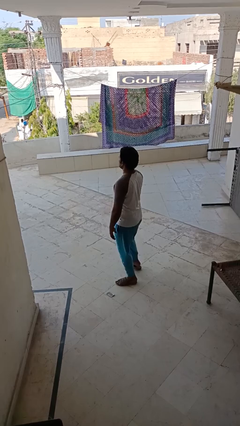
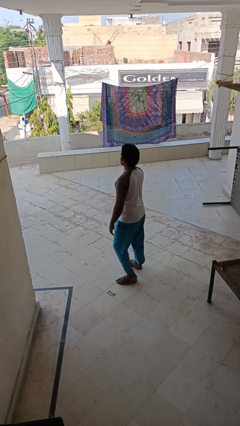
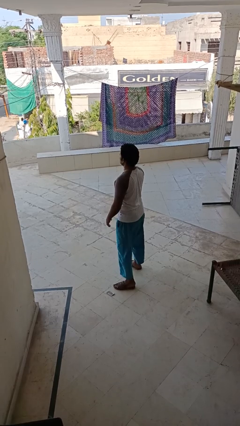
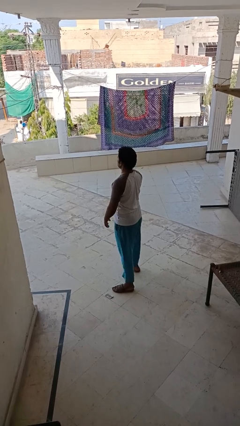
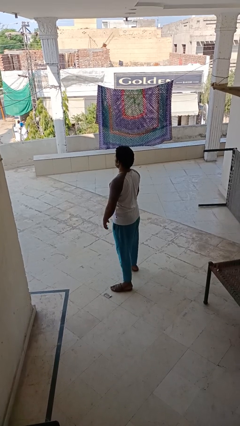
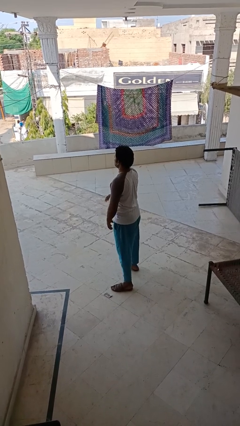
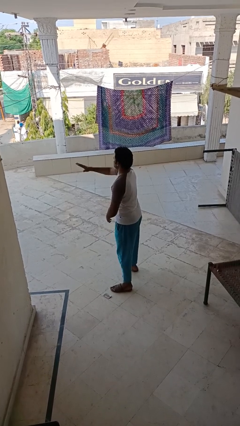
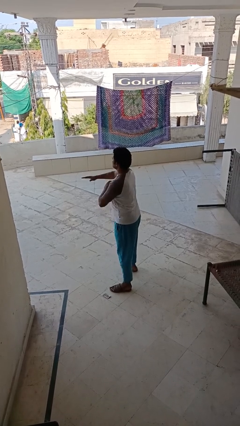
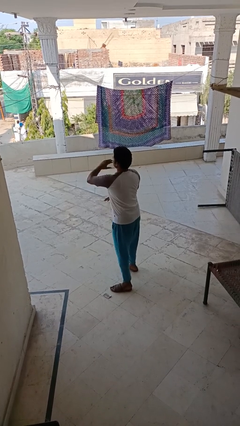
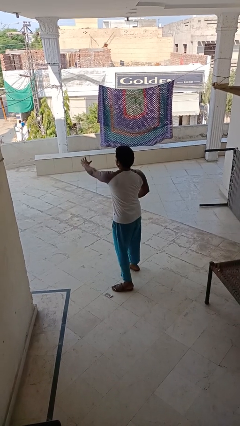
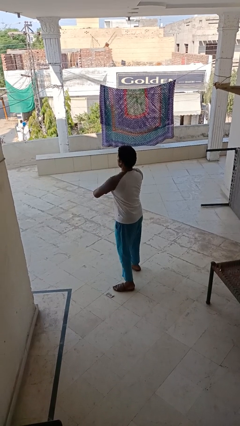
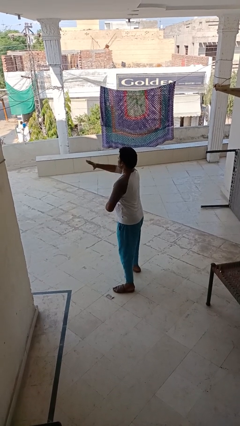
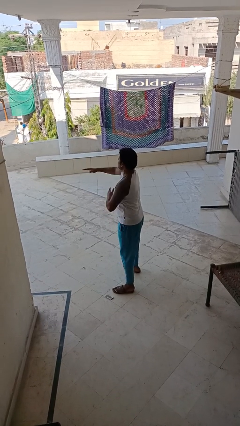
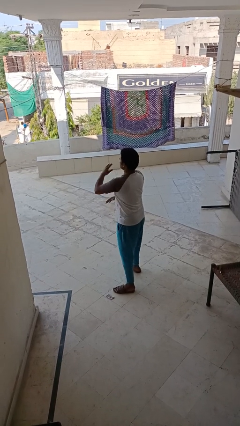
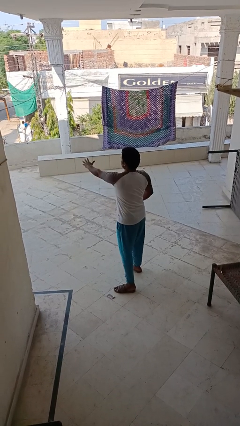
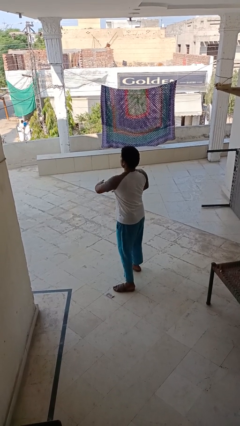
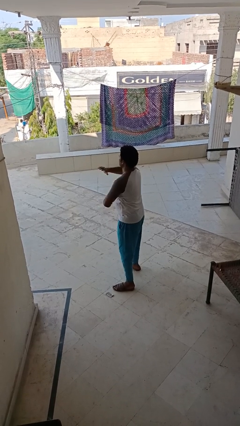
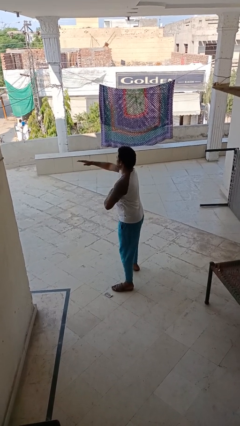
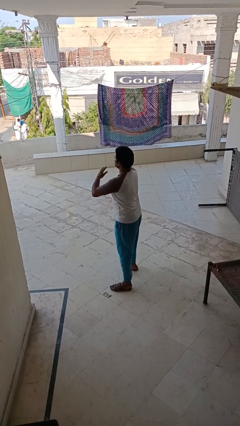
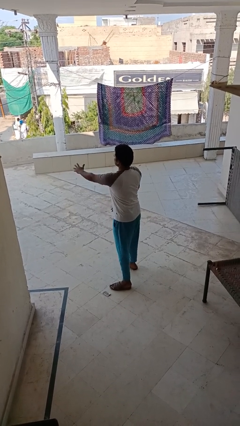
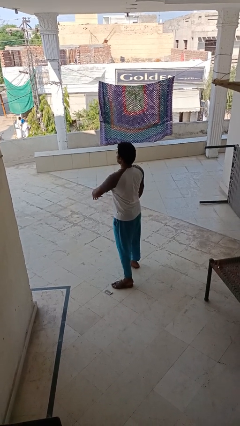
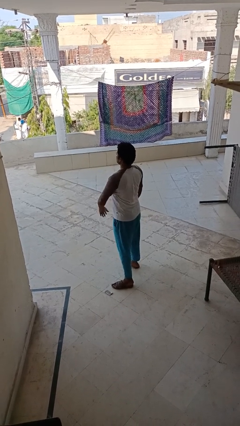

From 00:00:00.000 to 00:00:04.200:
person karate chop

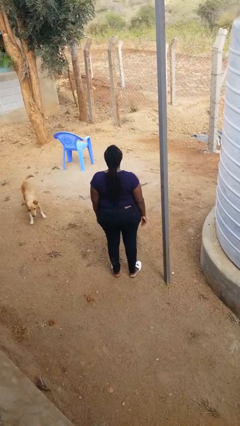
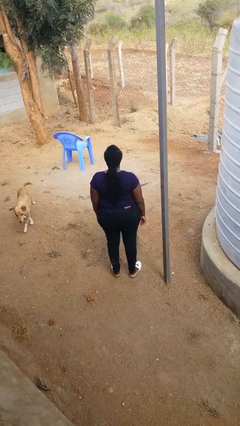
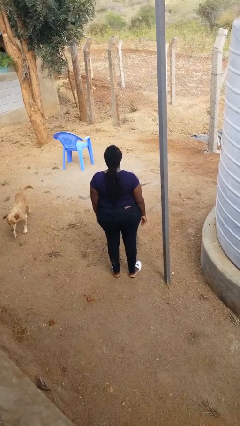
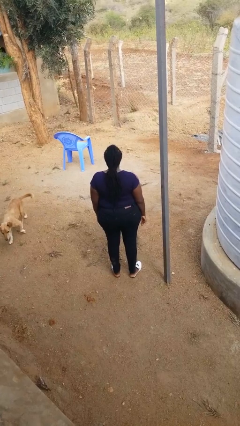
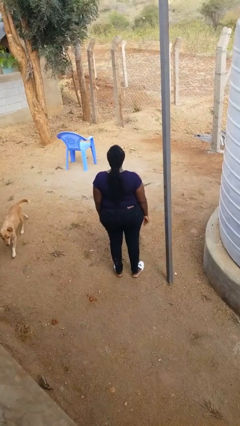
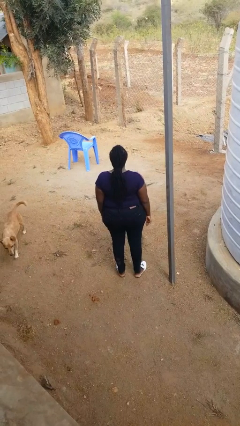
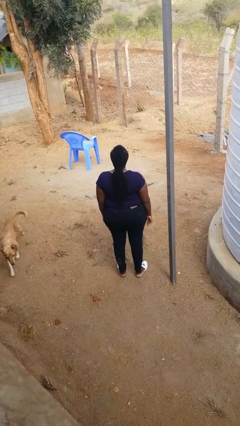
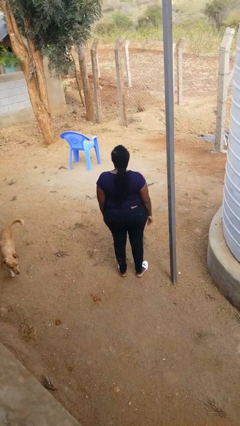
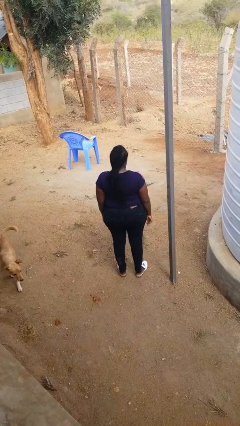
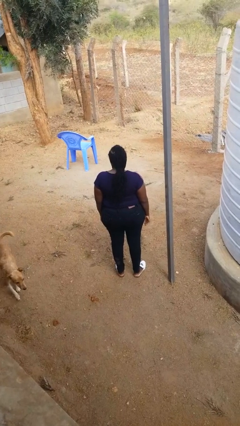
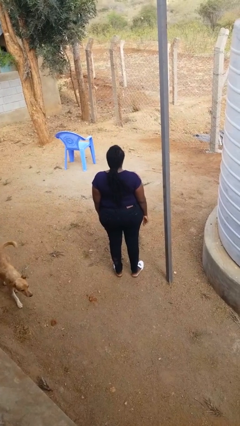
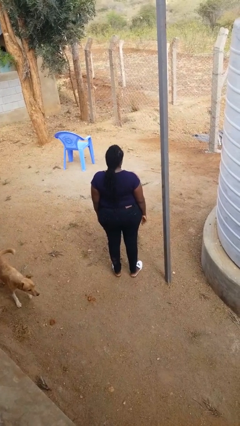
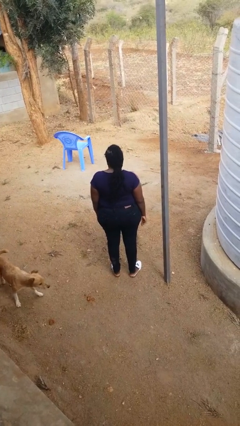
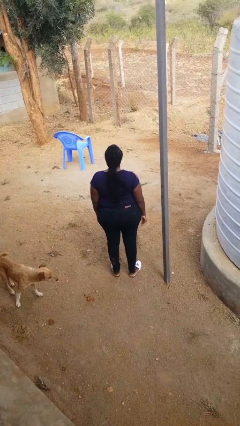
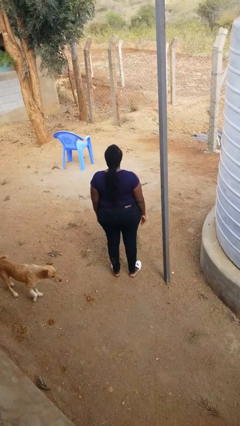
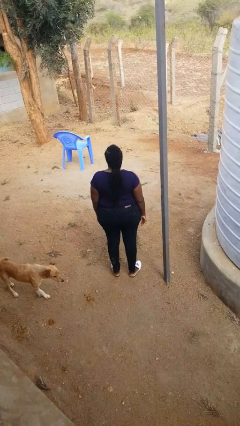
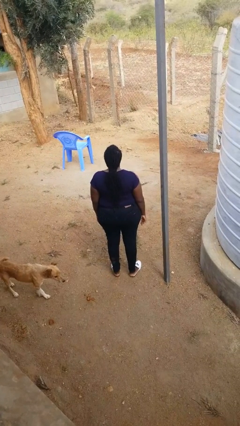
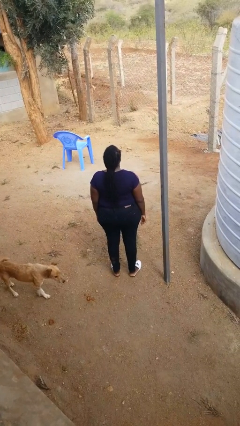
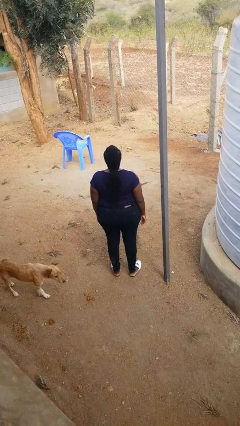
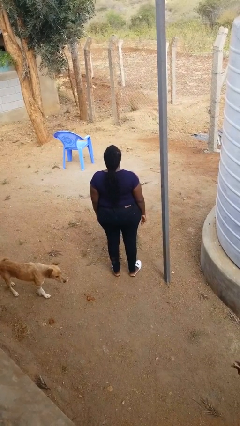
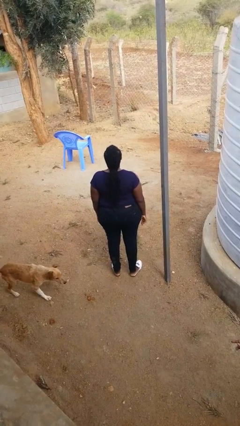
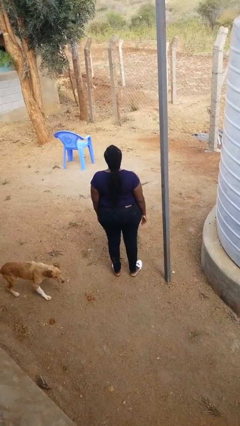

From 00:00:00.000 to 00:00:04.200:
person shakes head

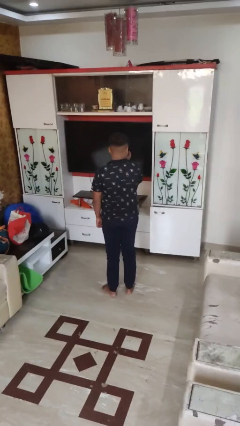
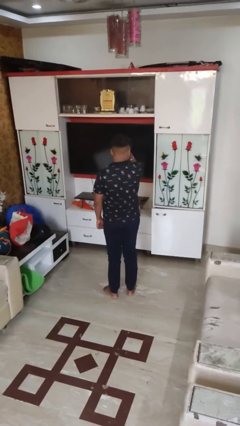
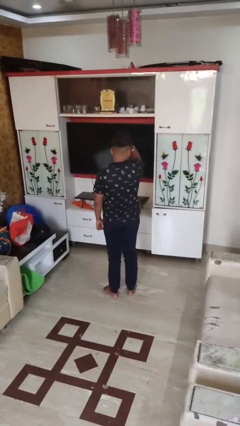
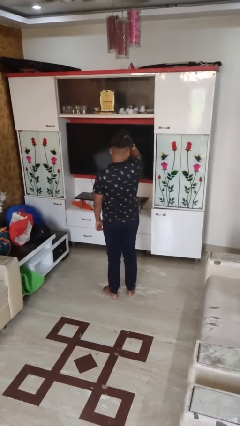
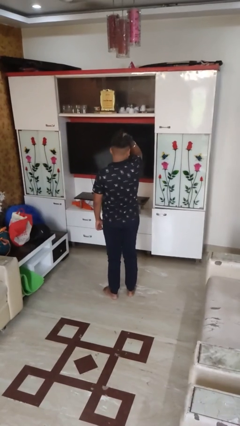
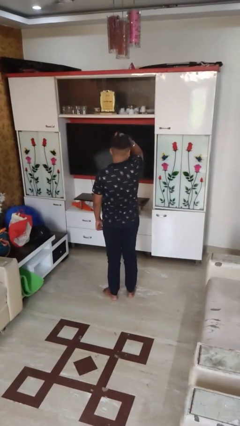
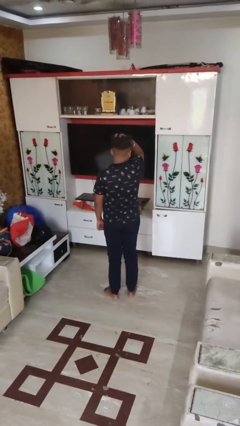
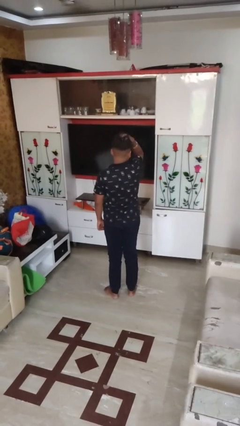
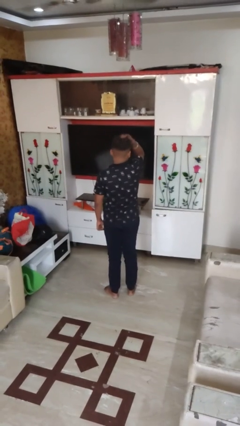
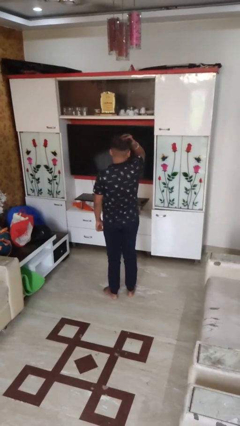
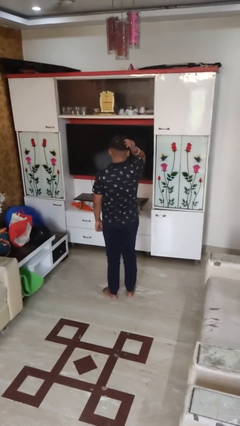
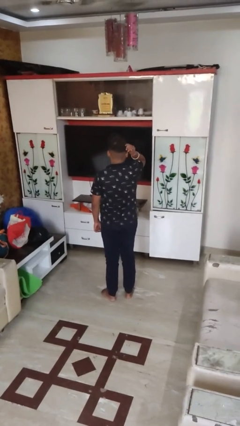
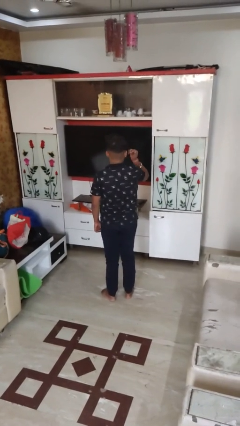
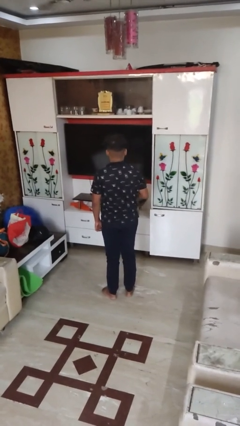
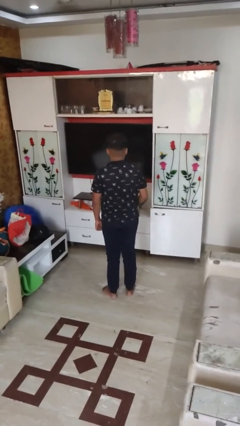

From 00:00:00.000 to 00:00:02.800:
person strokes hair

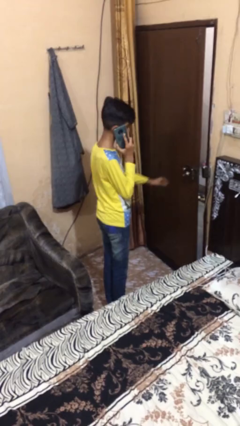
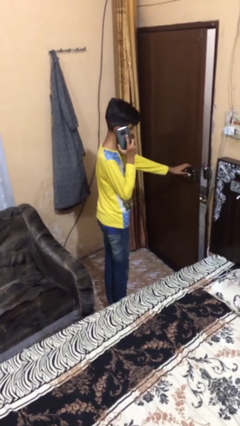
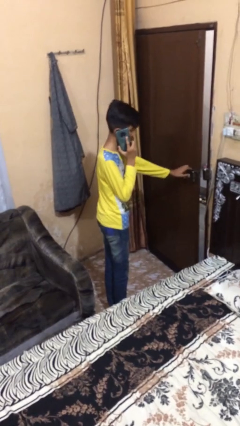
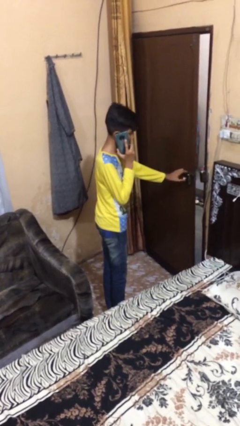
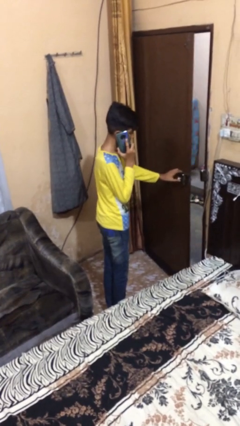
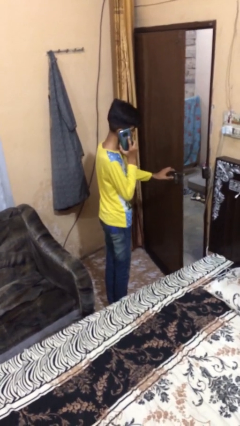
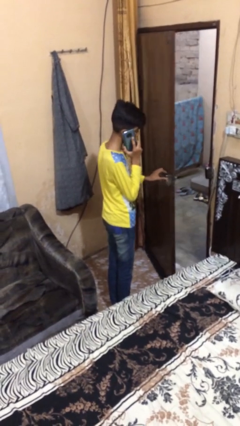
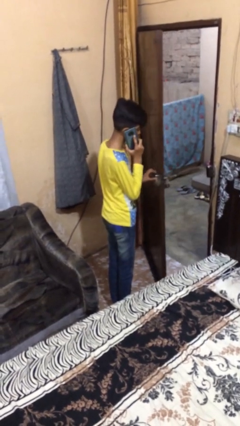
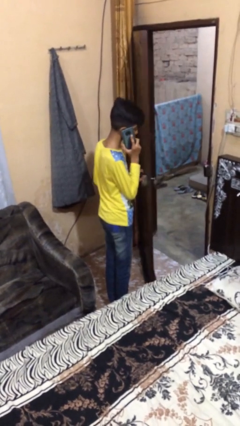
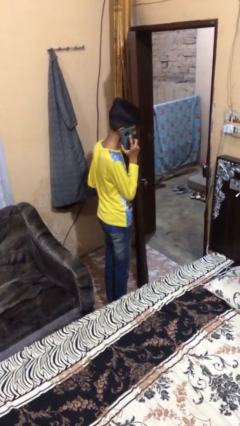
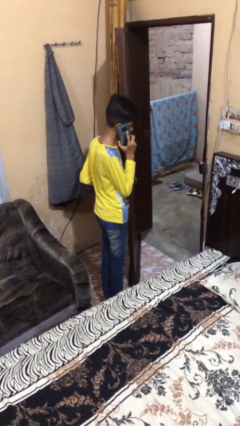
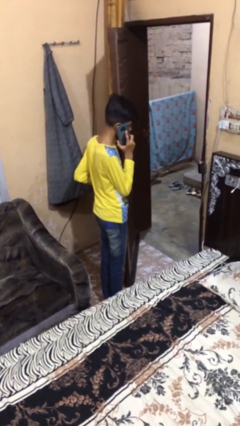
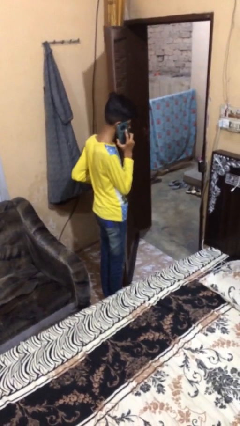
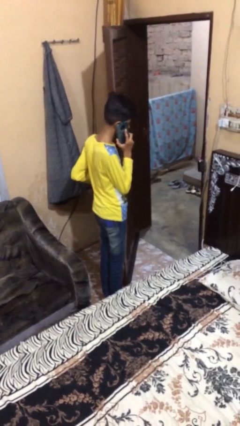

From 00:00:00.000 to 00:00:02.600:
person opens facility door

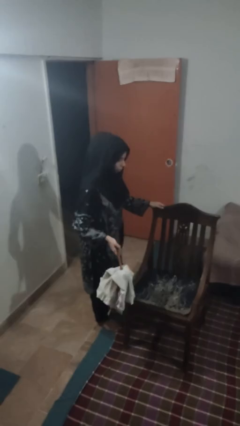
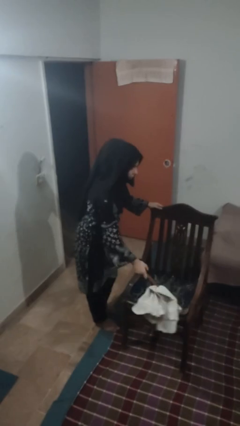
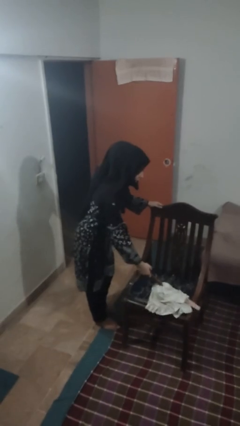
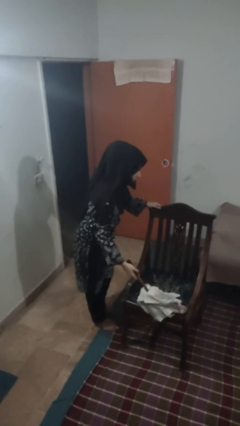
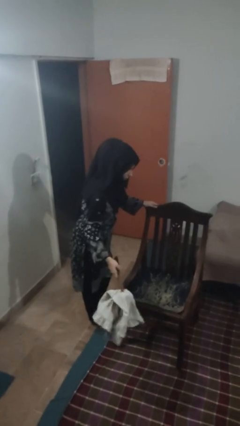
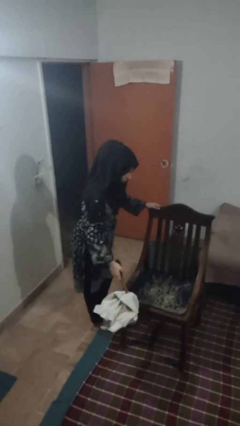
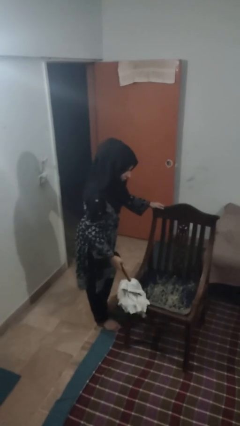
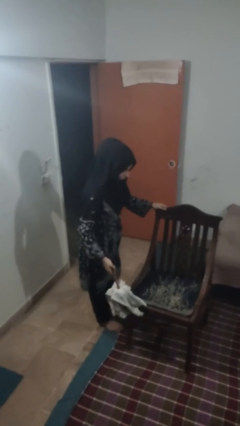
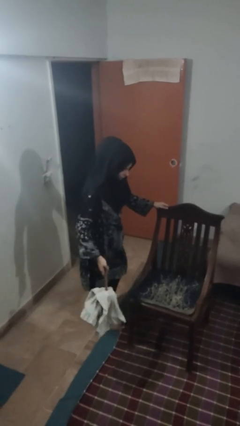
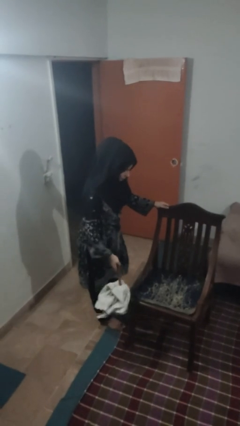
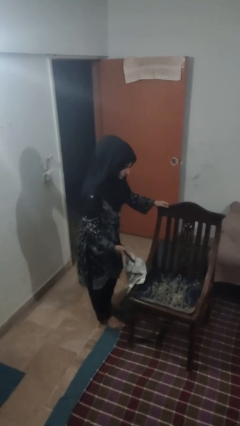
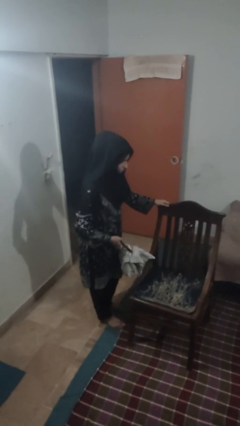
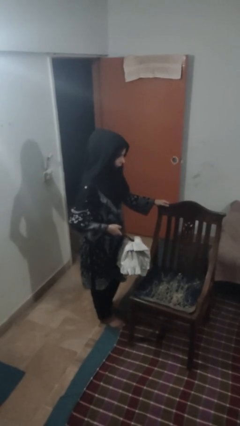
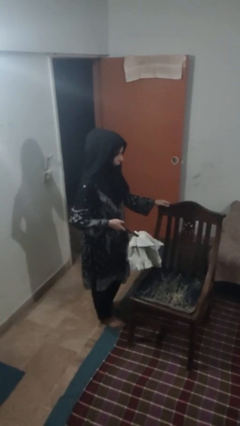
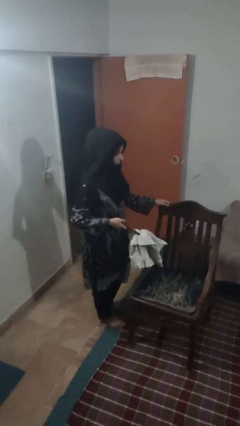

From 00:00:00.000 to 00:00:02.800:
person dusts furniture

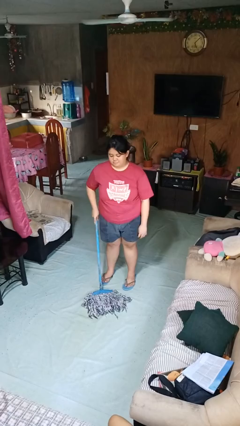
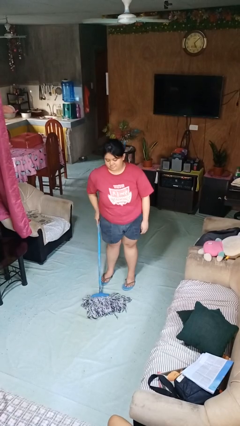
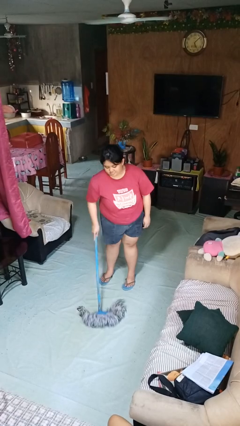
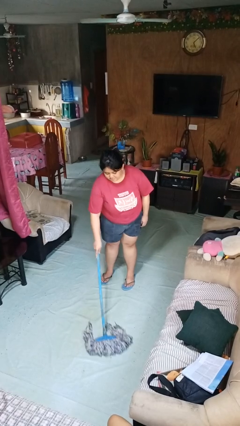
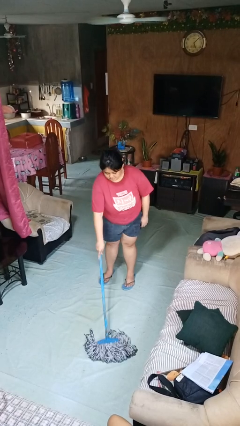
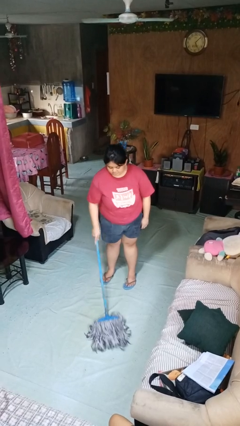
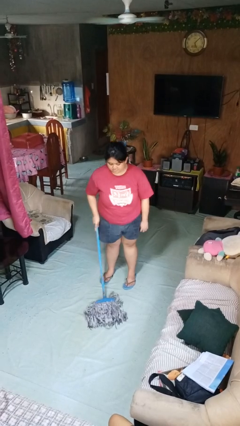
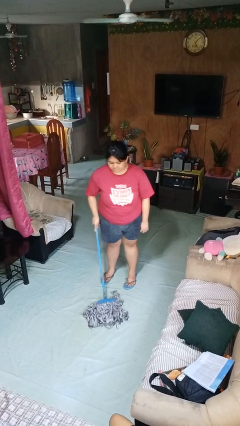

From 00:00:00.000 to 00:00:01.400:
person mops
